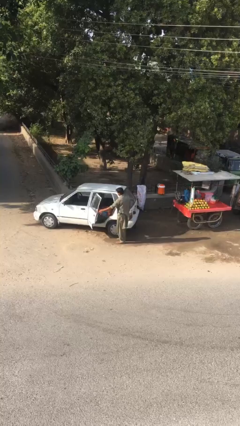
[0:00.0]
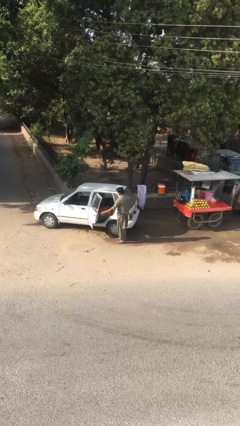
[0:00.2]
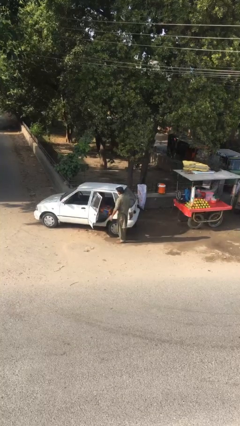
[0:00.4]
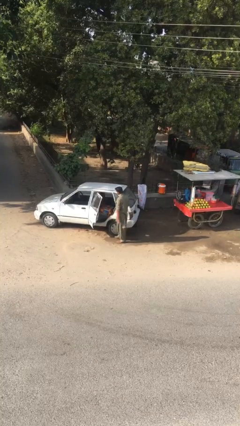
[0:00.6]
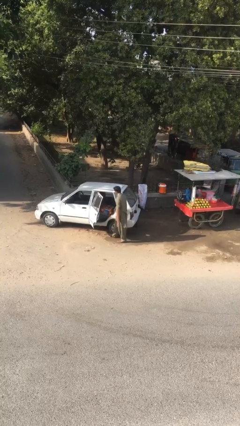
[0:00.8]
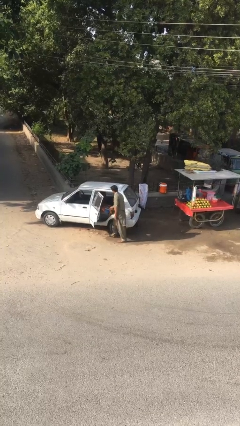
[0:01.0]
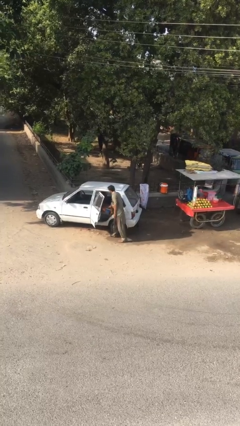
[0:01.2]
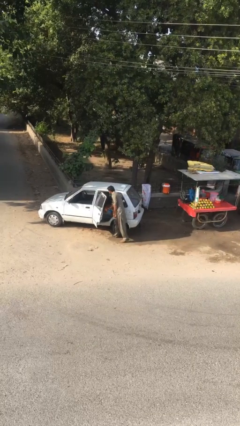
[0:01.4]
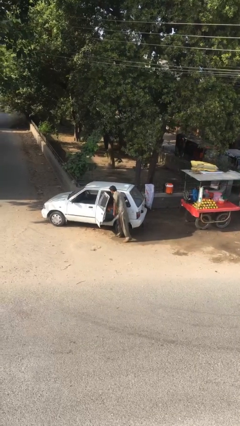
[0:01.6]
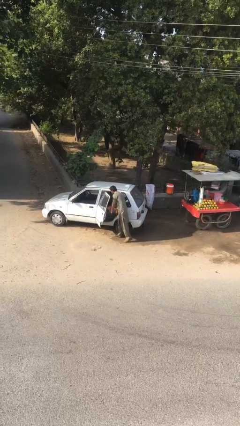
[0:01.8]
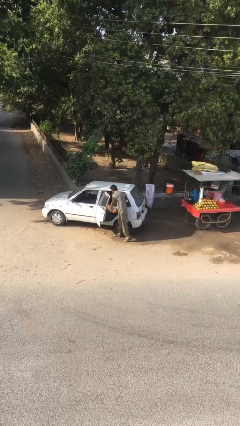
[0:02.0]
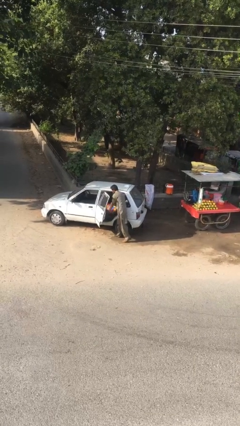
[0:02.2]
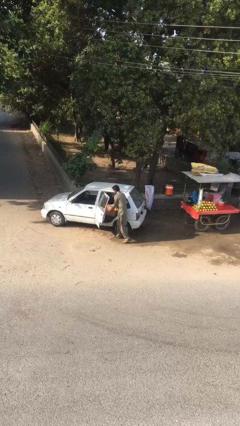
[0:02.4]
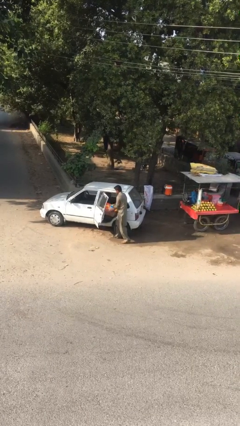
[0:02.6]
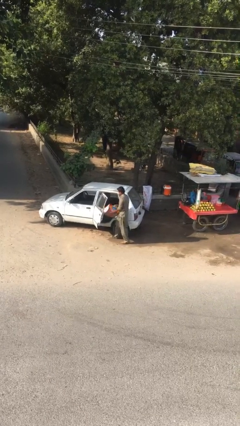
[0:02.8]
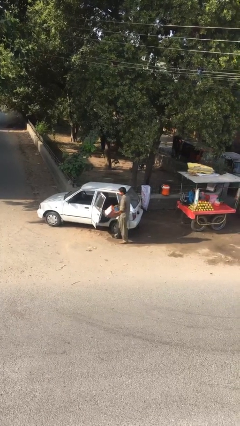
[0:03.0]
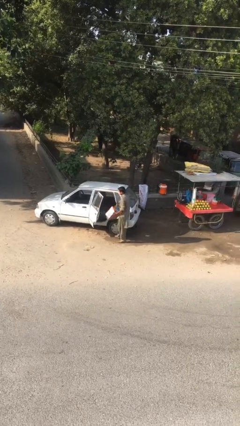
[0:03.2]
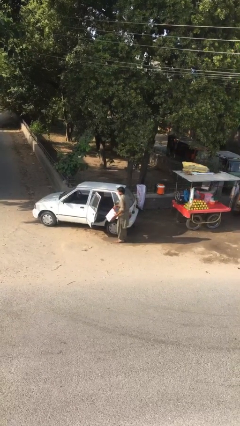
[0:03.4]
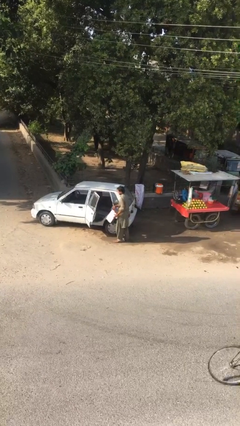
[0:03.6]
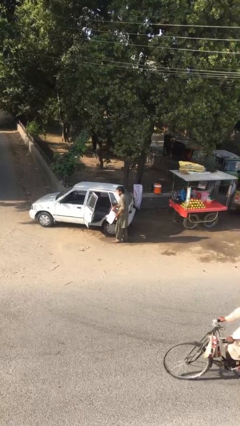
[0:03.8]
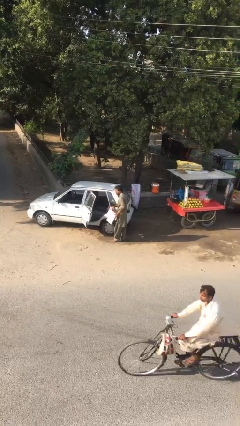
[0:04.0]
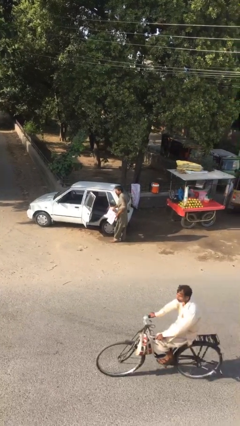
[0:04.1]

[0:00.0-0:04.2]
person unloads car

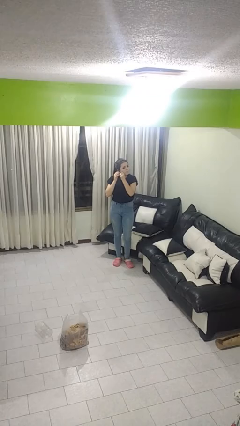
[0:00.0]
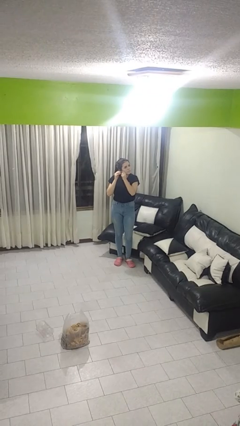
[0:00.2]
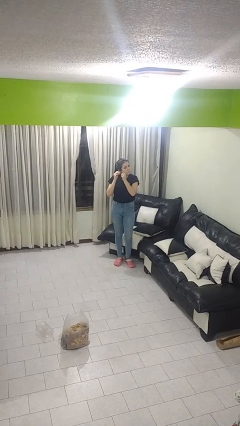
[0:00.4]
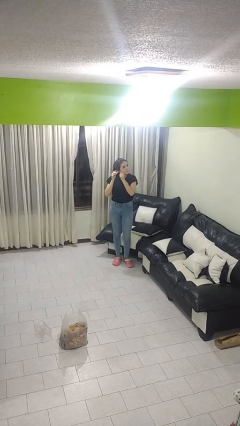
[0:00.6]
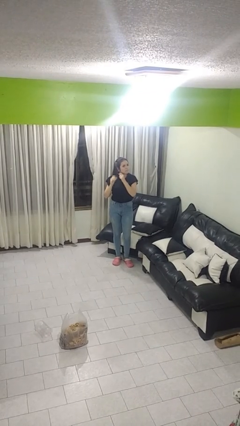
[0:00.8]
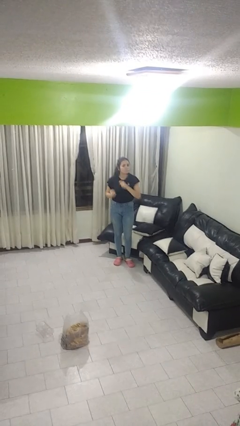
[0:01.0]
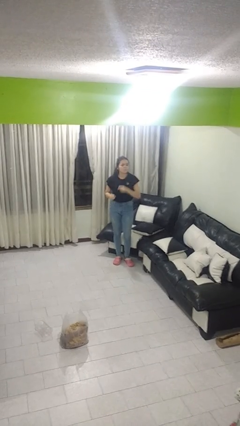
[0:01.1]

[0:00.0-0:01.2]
person takes off earrings

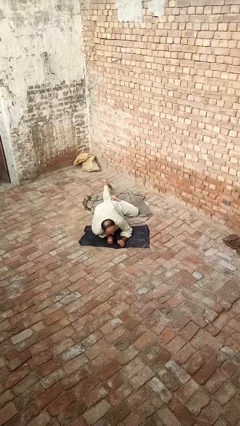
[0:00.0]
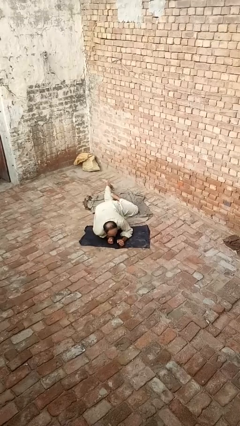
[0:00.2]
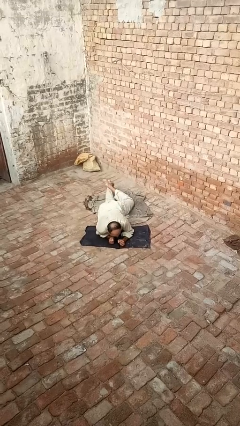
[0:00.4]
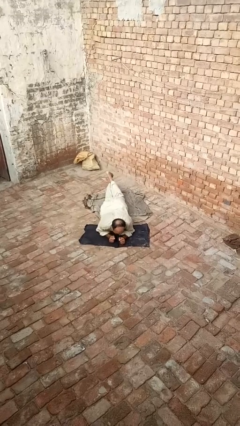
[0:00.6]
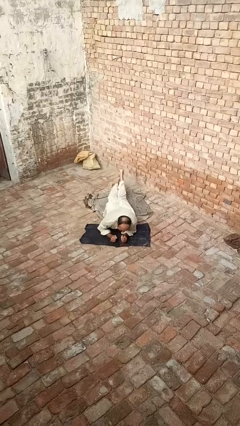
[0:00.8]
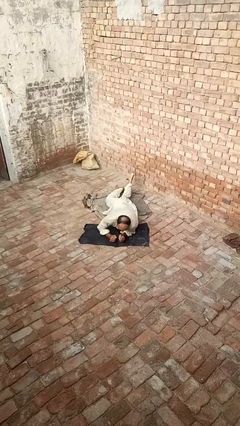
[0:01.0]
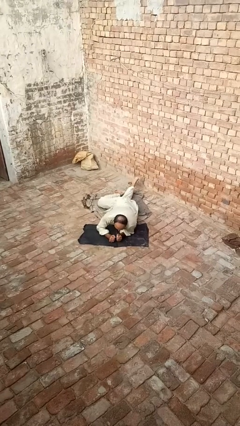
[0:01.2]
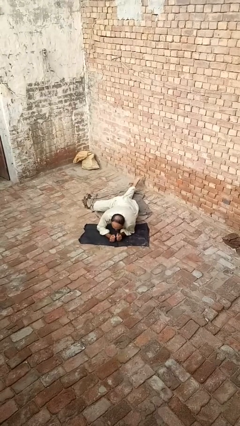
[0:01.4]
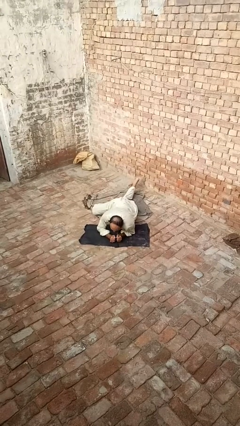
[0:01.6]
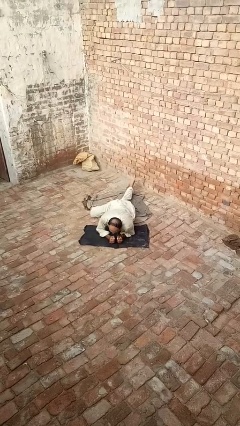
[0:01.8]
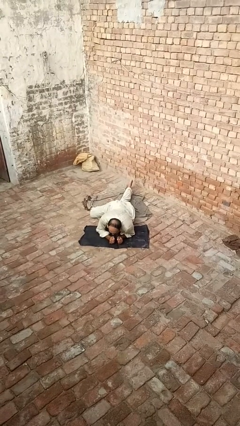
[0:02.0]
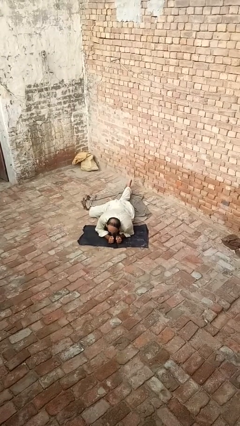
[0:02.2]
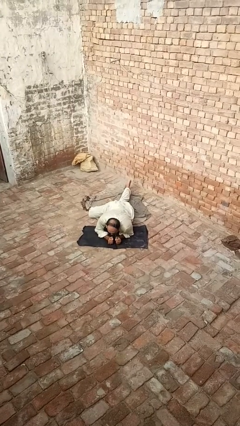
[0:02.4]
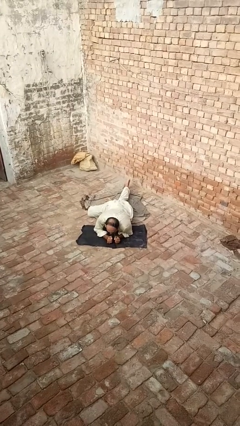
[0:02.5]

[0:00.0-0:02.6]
person crawls

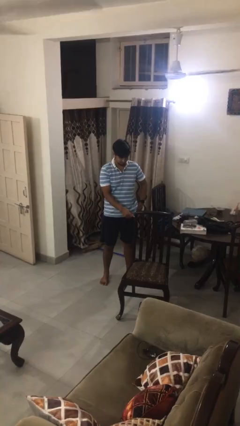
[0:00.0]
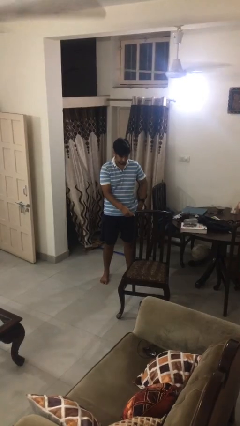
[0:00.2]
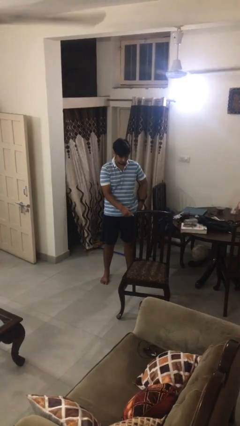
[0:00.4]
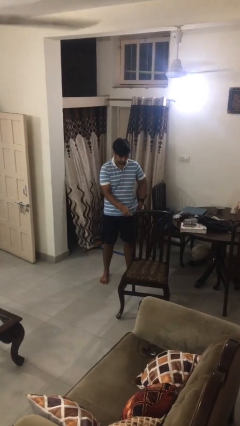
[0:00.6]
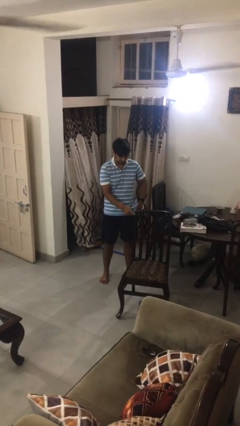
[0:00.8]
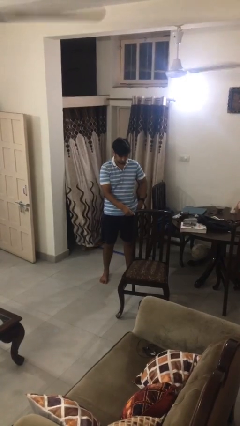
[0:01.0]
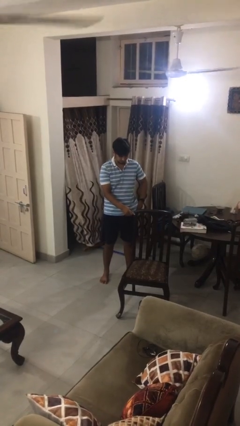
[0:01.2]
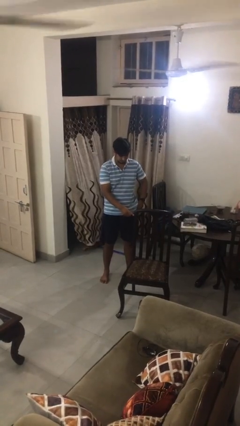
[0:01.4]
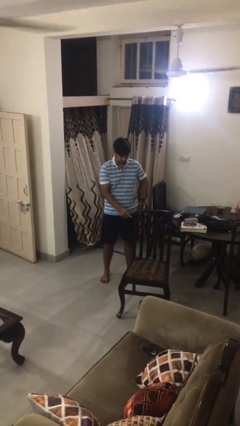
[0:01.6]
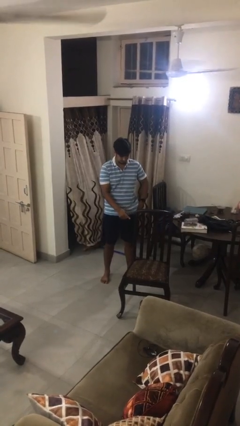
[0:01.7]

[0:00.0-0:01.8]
person taps object with finger

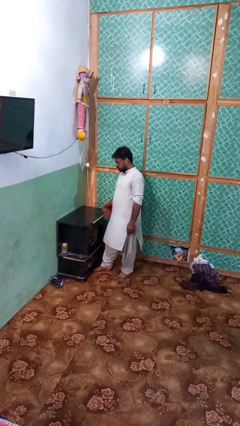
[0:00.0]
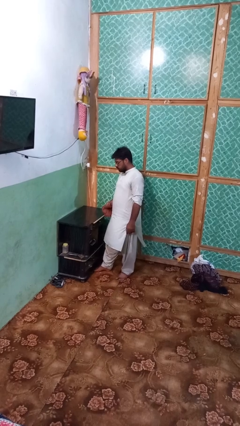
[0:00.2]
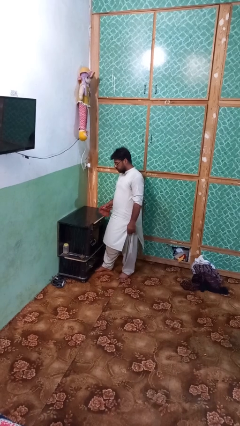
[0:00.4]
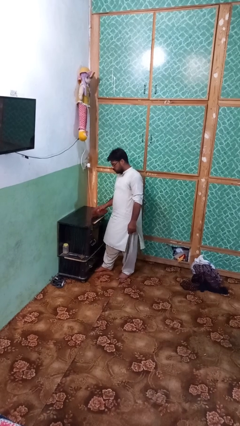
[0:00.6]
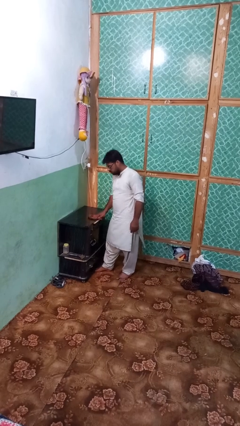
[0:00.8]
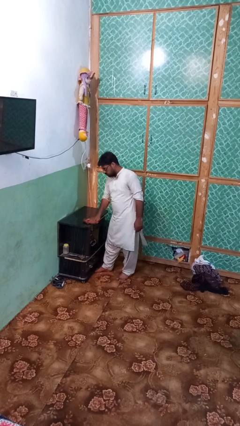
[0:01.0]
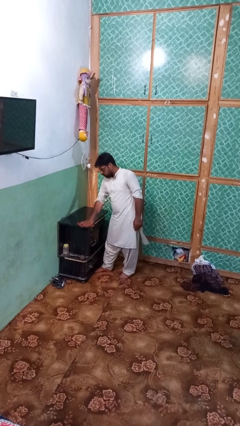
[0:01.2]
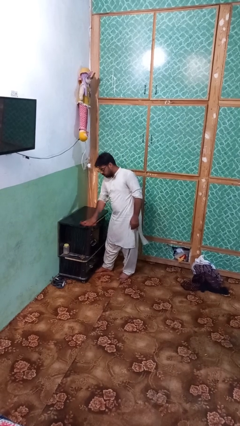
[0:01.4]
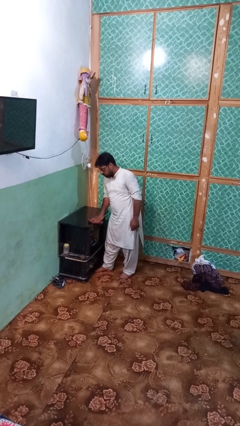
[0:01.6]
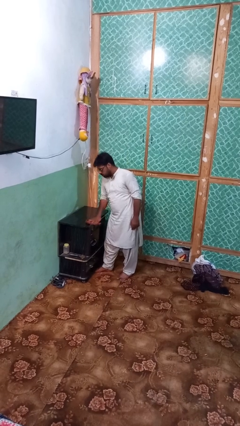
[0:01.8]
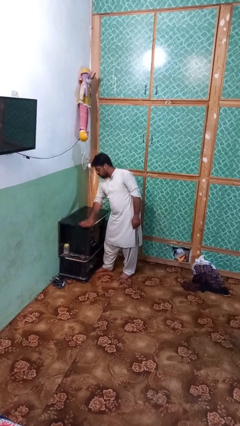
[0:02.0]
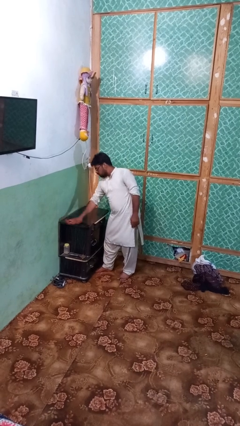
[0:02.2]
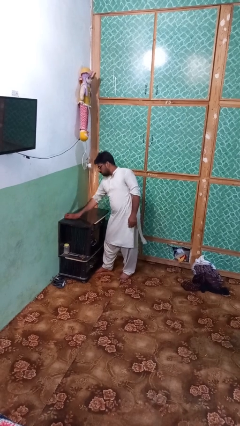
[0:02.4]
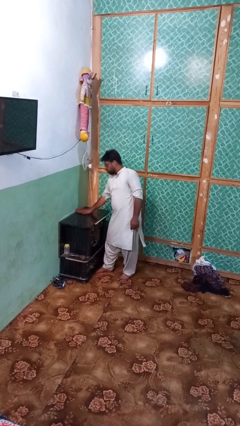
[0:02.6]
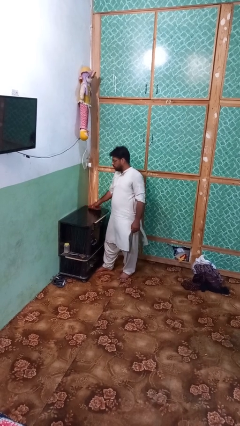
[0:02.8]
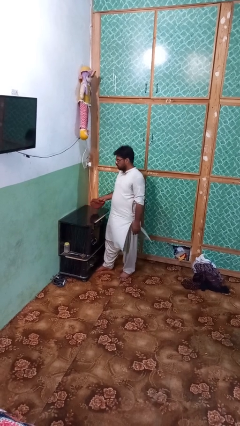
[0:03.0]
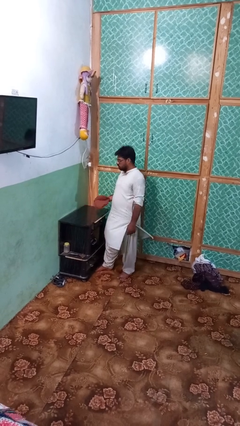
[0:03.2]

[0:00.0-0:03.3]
person cleans table with rag

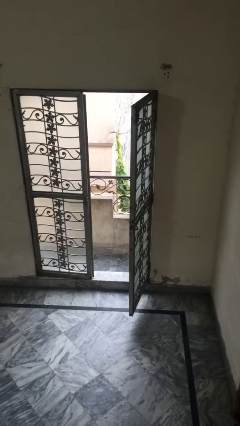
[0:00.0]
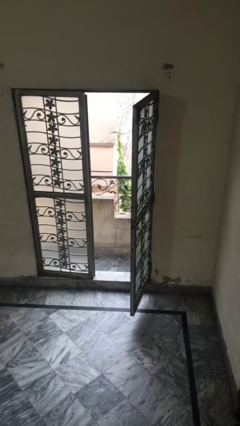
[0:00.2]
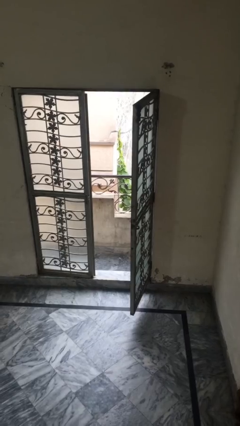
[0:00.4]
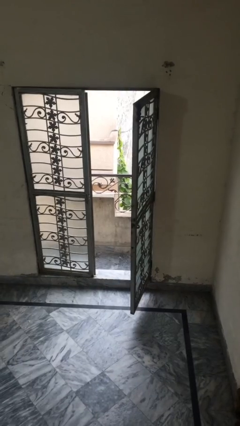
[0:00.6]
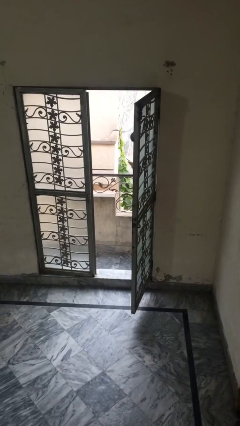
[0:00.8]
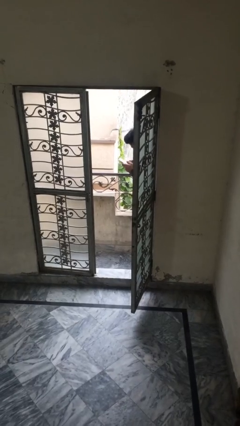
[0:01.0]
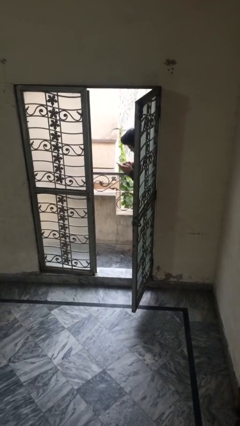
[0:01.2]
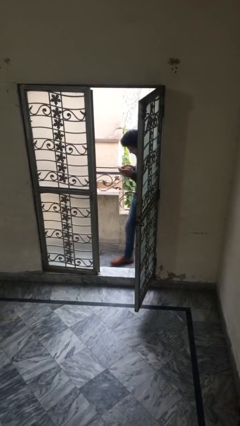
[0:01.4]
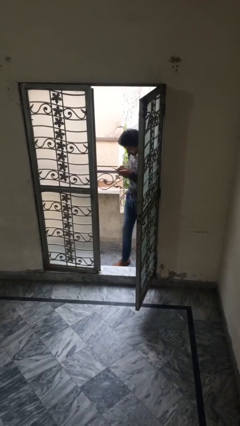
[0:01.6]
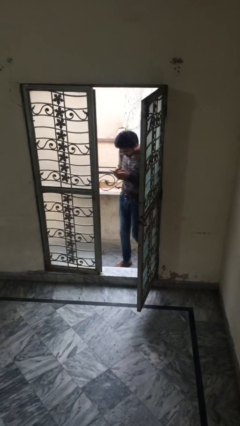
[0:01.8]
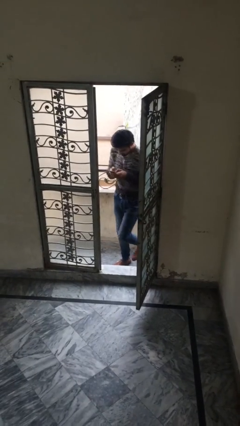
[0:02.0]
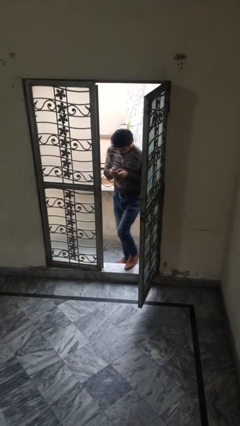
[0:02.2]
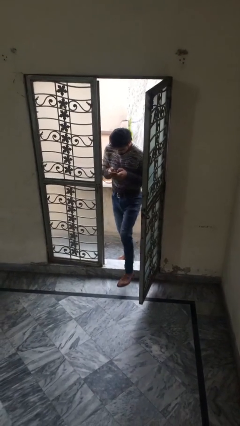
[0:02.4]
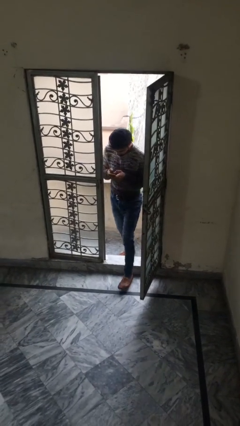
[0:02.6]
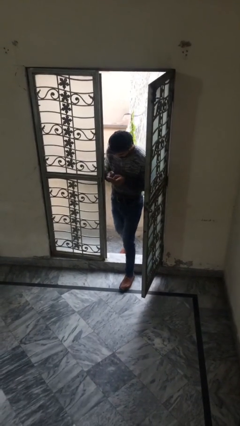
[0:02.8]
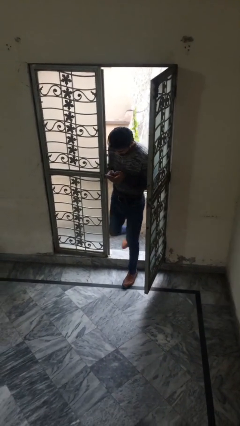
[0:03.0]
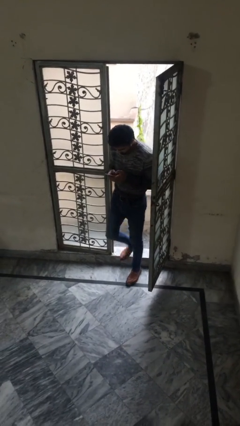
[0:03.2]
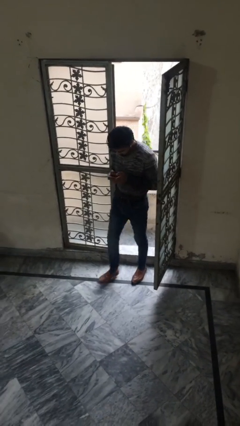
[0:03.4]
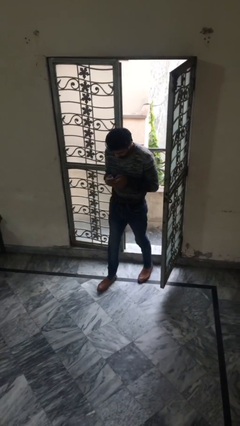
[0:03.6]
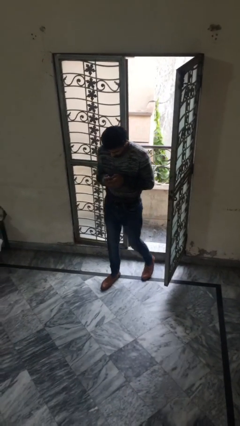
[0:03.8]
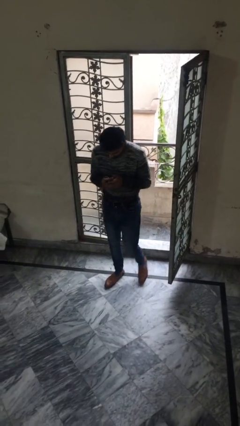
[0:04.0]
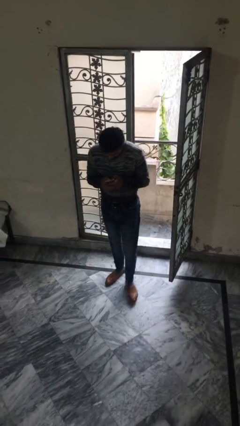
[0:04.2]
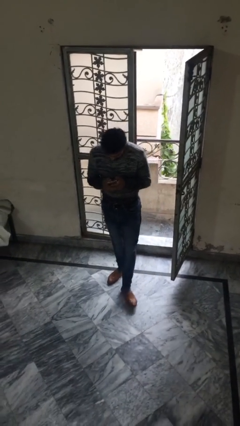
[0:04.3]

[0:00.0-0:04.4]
person enters scene through structure

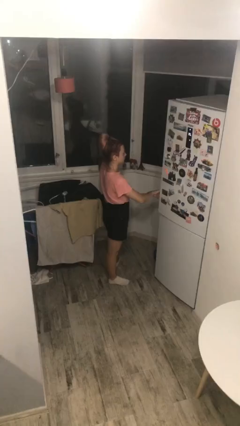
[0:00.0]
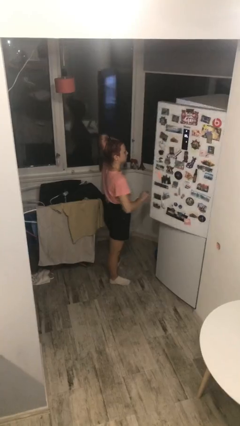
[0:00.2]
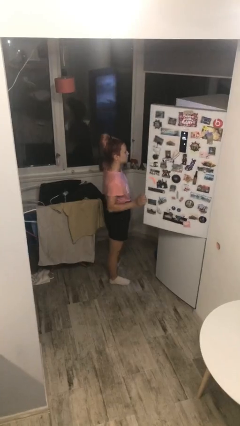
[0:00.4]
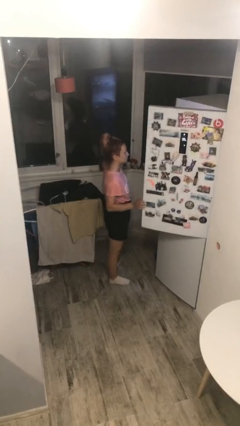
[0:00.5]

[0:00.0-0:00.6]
person opens refrigerator
